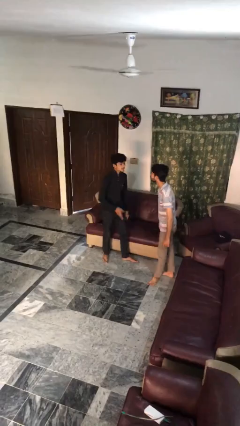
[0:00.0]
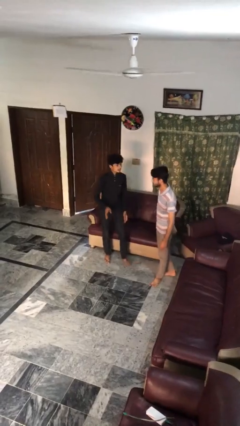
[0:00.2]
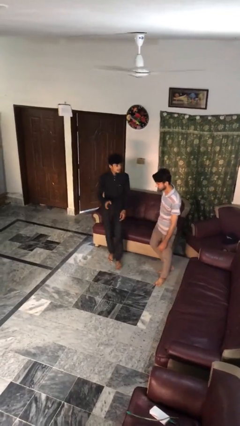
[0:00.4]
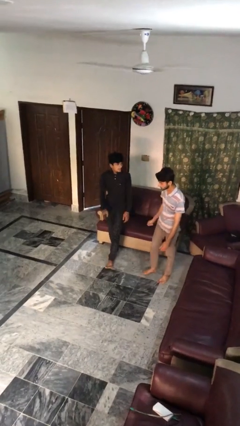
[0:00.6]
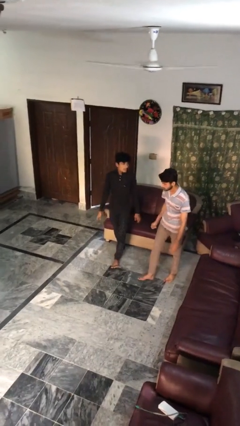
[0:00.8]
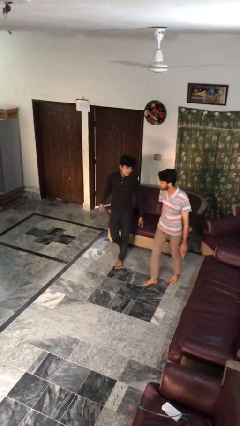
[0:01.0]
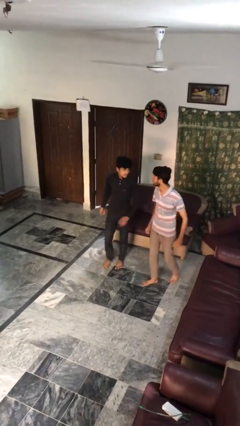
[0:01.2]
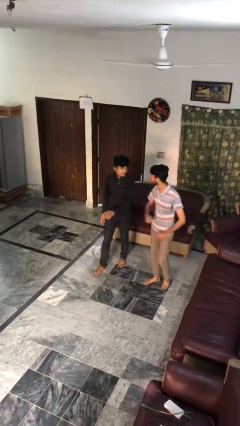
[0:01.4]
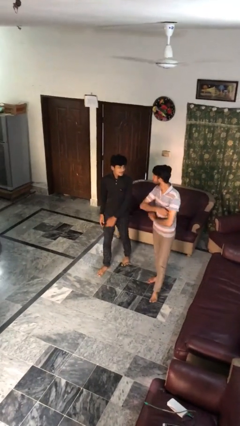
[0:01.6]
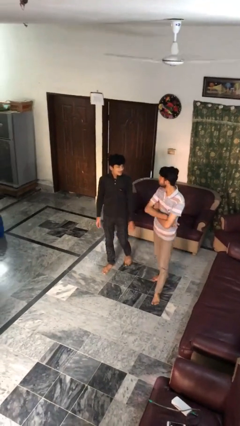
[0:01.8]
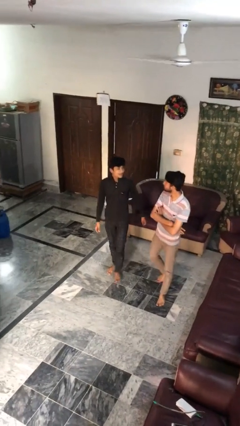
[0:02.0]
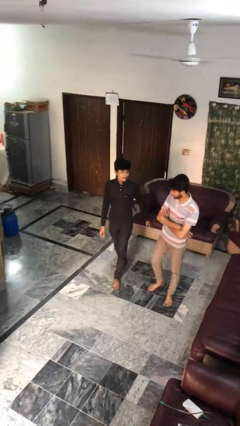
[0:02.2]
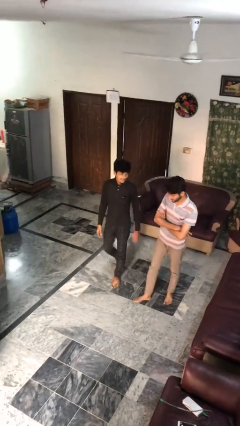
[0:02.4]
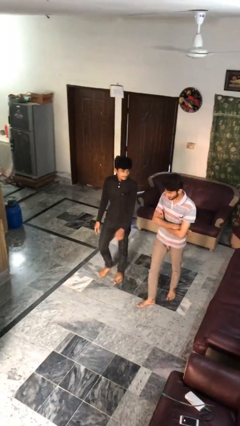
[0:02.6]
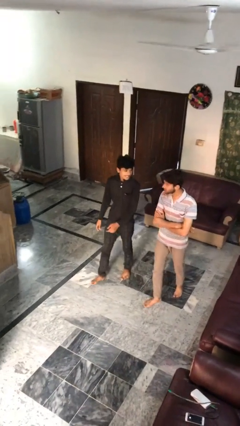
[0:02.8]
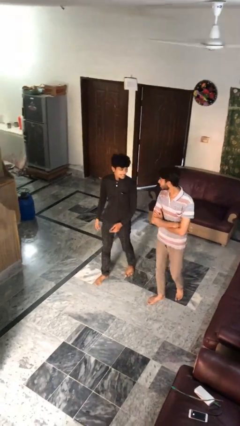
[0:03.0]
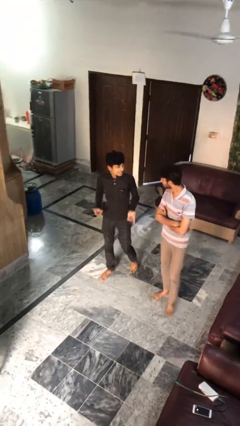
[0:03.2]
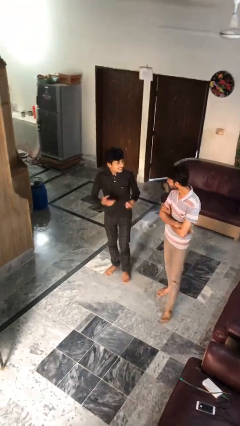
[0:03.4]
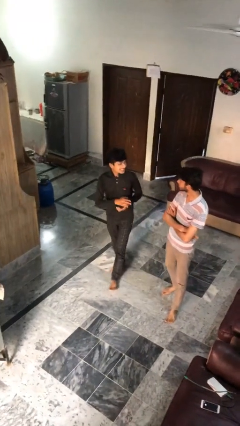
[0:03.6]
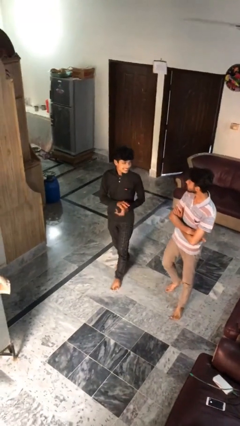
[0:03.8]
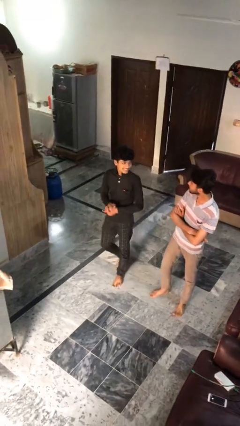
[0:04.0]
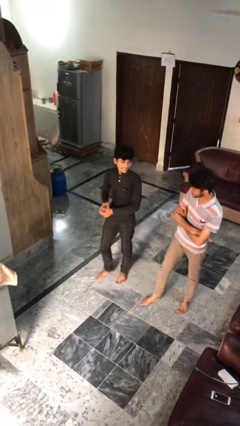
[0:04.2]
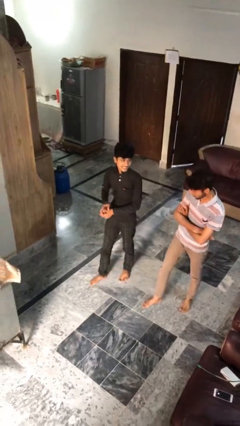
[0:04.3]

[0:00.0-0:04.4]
person talks to person

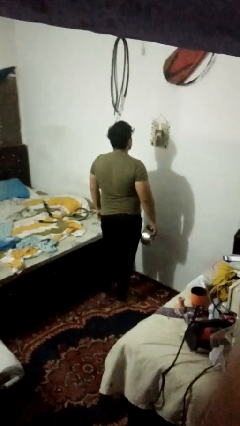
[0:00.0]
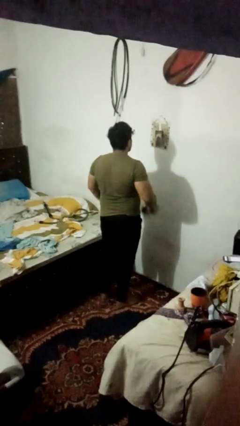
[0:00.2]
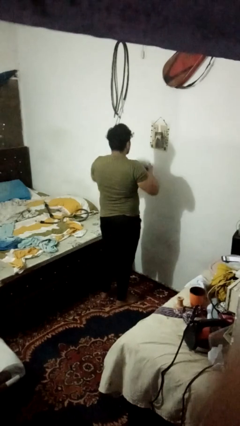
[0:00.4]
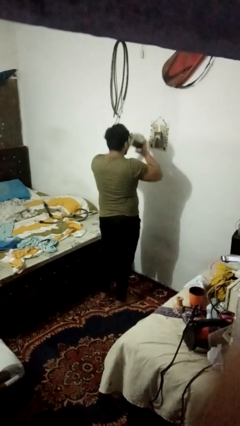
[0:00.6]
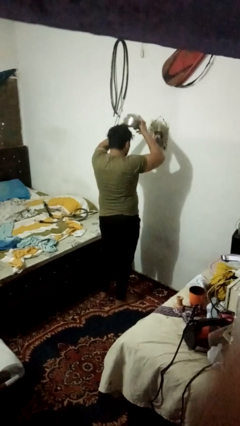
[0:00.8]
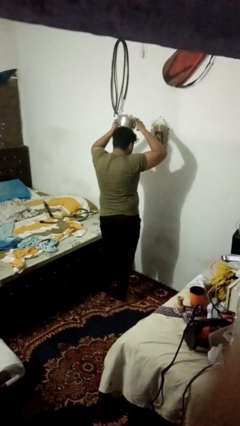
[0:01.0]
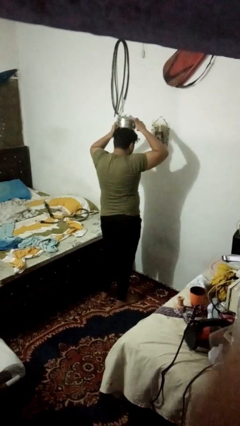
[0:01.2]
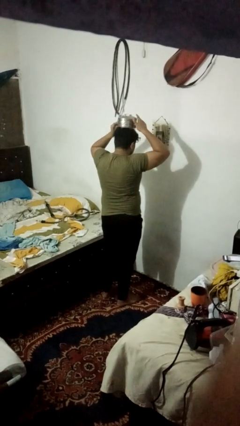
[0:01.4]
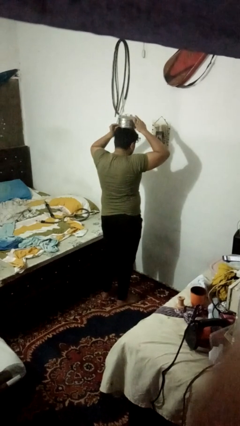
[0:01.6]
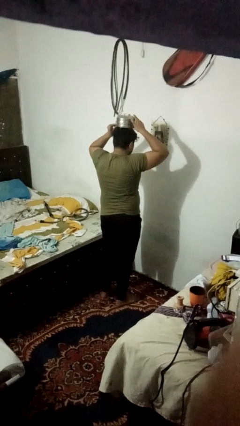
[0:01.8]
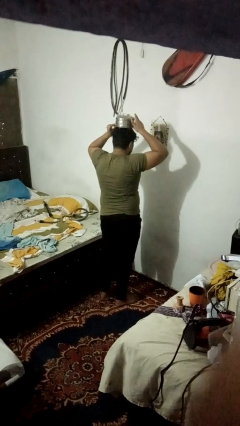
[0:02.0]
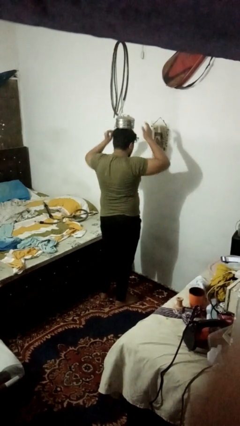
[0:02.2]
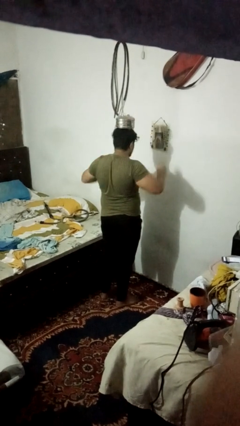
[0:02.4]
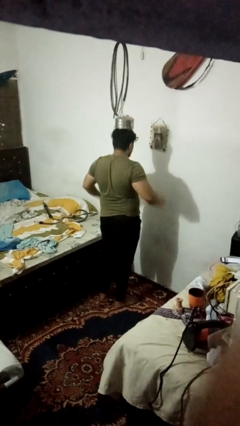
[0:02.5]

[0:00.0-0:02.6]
person holds object above head

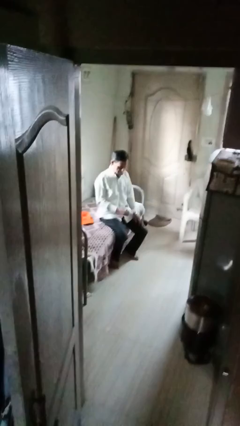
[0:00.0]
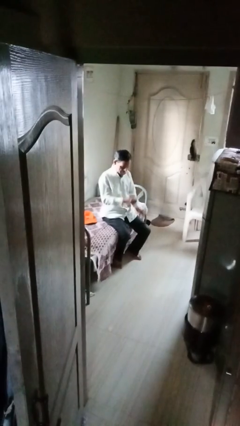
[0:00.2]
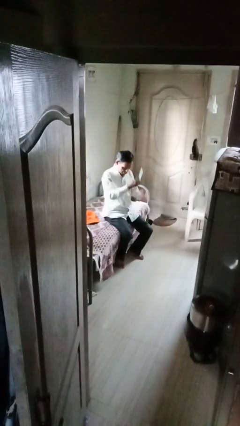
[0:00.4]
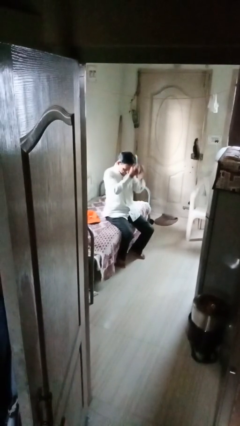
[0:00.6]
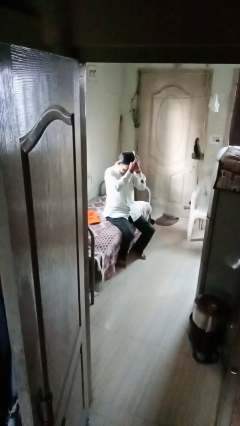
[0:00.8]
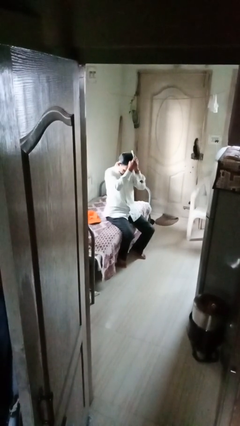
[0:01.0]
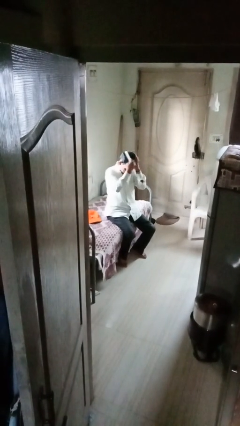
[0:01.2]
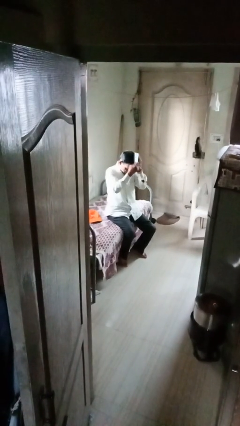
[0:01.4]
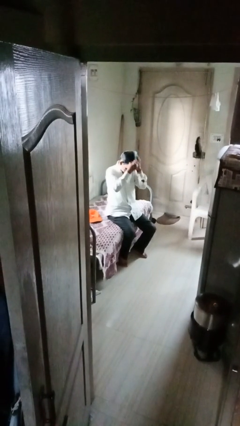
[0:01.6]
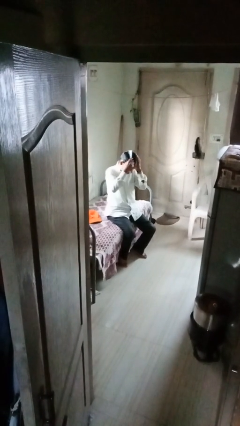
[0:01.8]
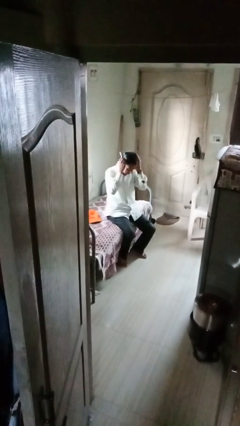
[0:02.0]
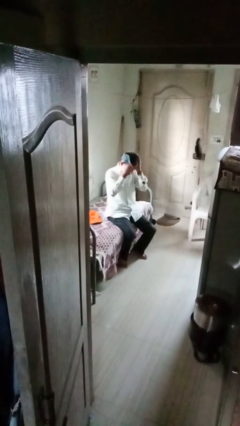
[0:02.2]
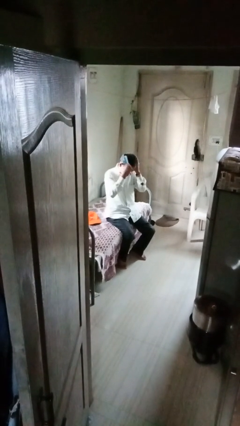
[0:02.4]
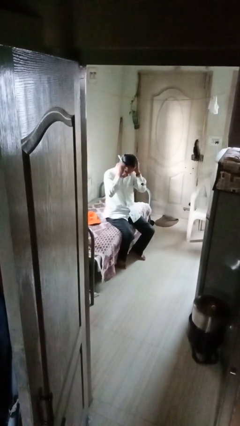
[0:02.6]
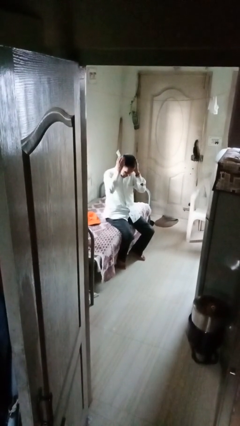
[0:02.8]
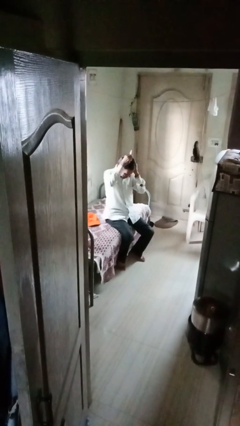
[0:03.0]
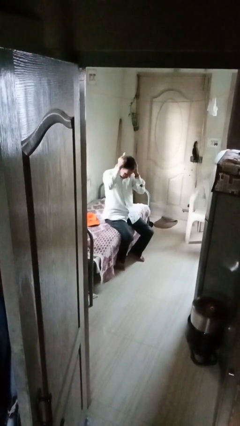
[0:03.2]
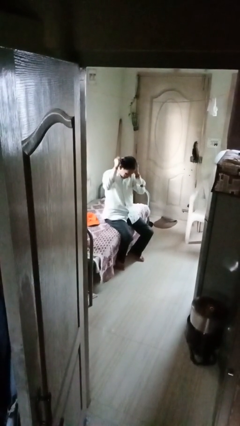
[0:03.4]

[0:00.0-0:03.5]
person brushes hair

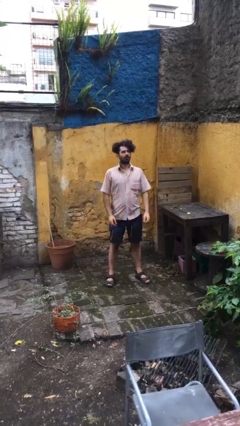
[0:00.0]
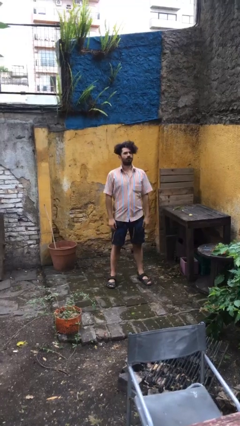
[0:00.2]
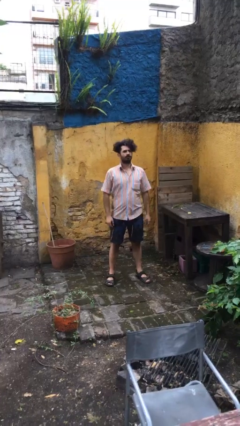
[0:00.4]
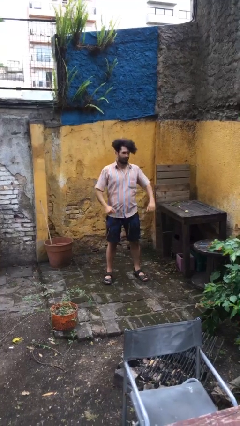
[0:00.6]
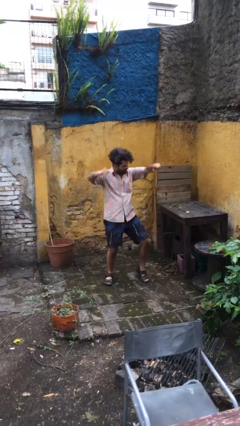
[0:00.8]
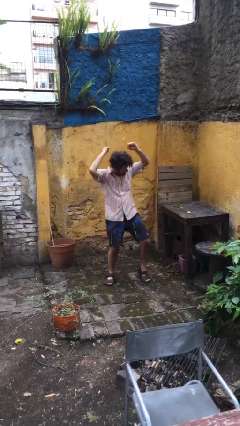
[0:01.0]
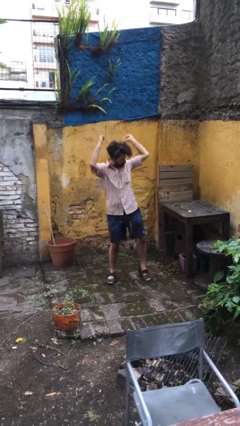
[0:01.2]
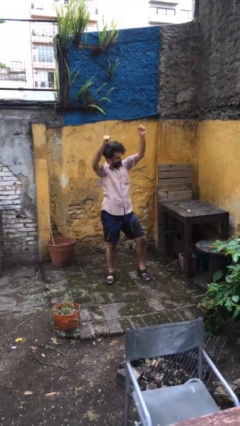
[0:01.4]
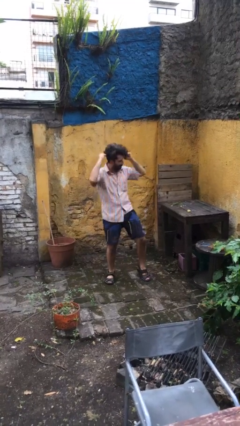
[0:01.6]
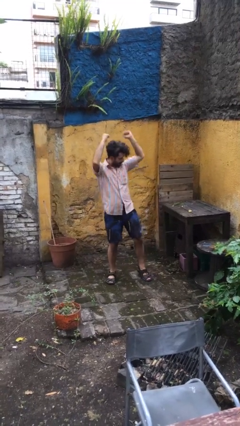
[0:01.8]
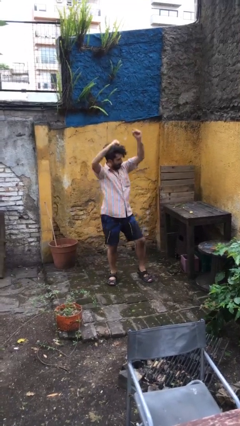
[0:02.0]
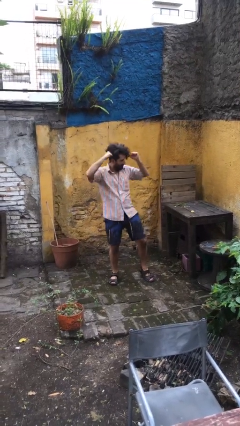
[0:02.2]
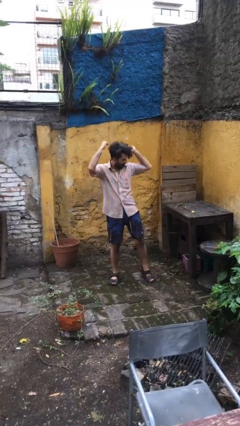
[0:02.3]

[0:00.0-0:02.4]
person dances in place

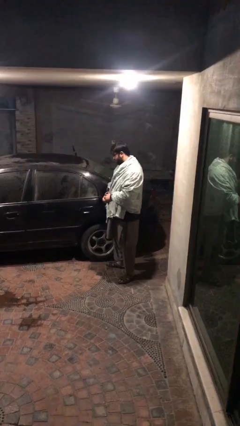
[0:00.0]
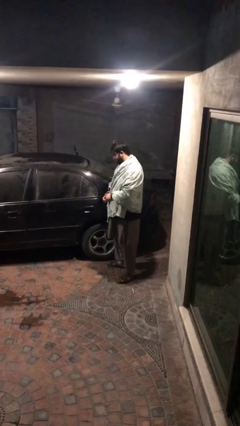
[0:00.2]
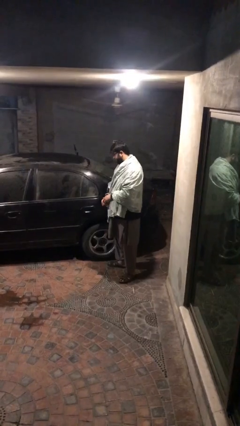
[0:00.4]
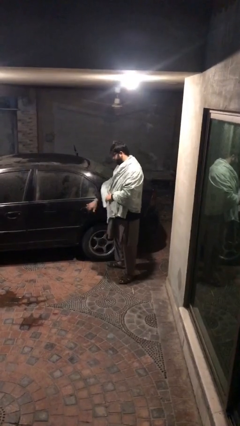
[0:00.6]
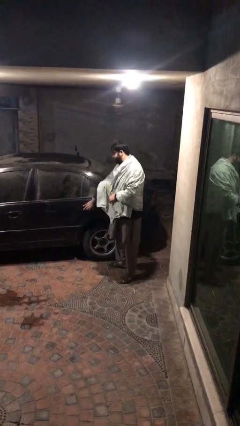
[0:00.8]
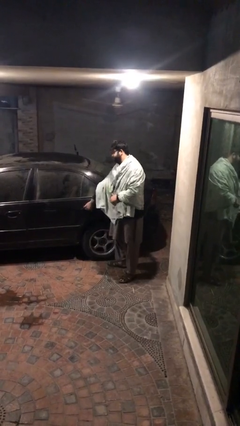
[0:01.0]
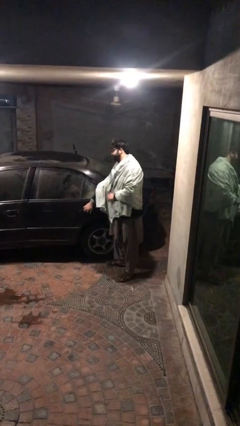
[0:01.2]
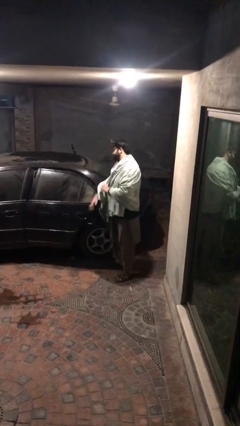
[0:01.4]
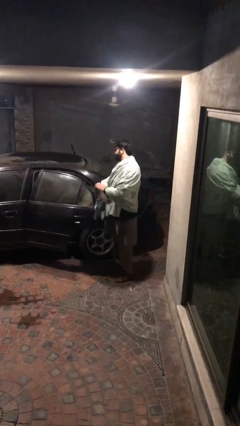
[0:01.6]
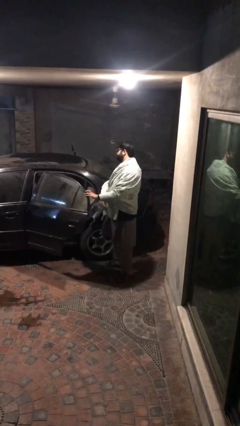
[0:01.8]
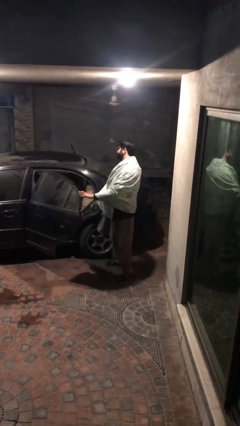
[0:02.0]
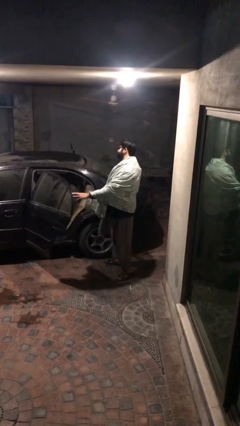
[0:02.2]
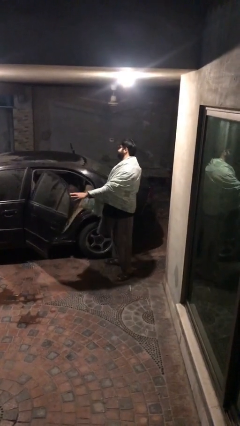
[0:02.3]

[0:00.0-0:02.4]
person opens car door

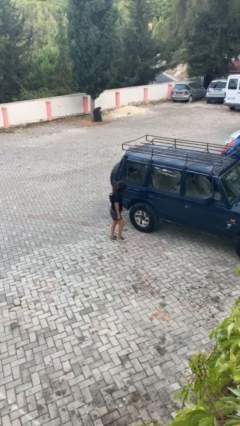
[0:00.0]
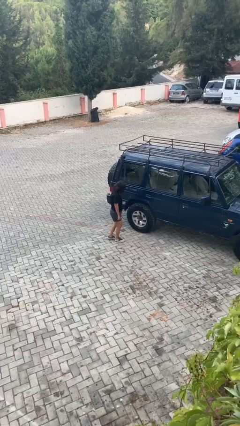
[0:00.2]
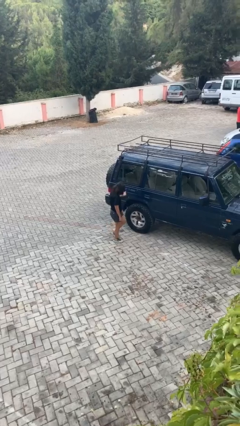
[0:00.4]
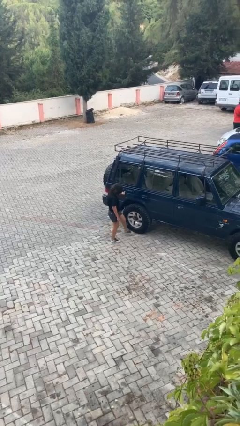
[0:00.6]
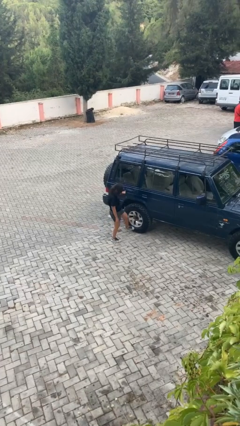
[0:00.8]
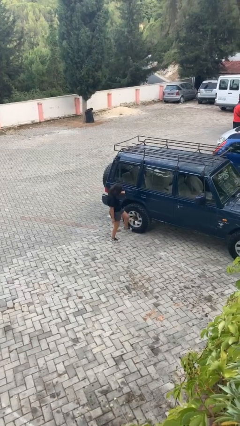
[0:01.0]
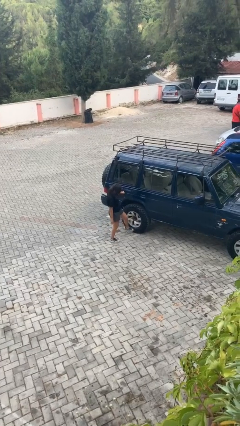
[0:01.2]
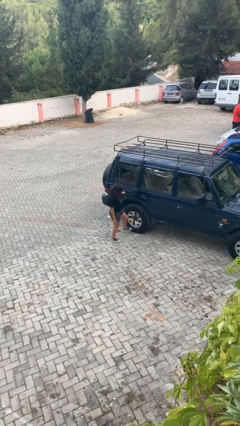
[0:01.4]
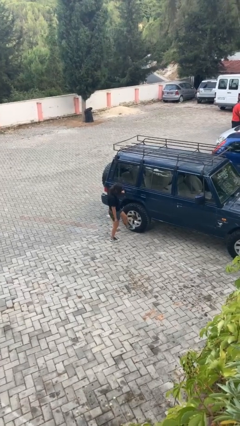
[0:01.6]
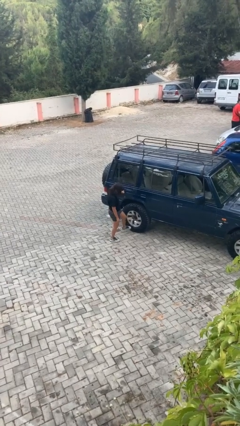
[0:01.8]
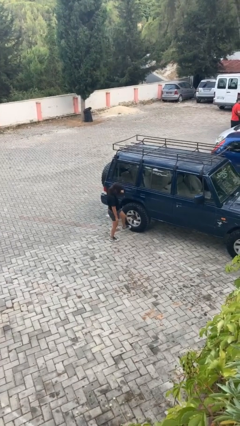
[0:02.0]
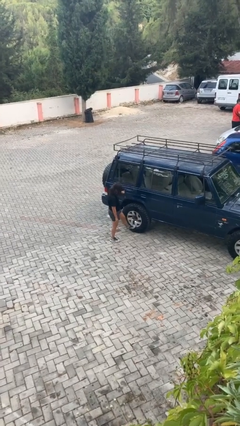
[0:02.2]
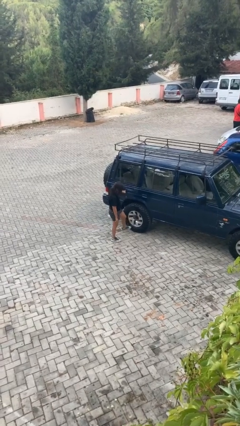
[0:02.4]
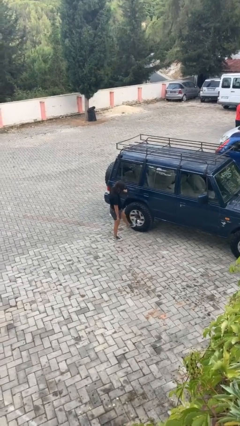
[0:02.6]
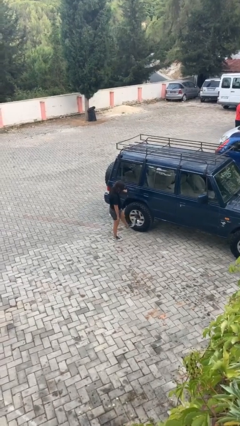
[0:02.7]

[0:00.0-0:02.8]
person kicks car tires
